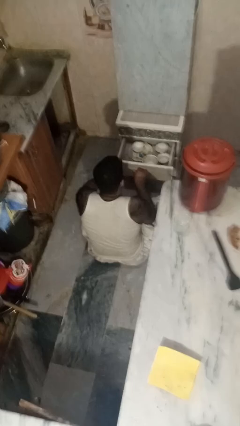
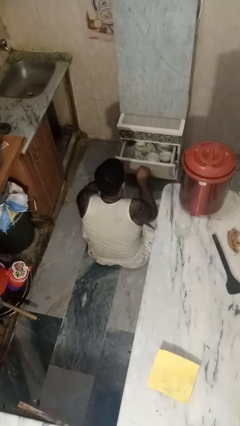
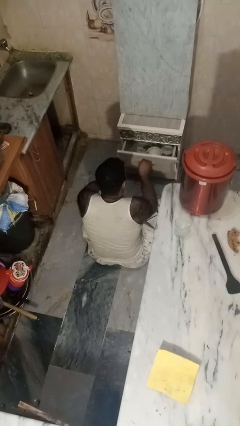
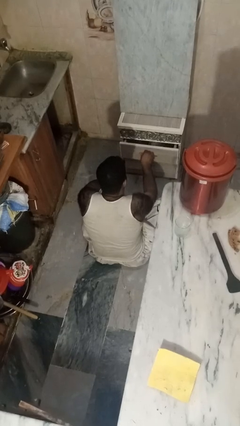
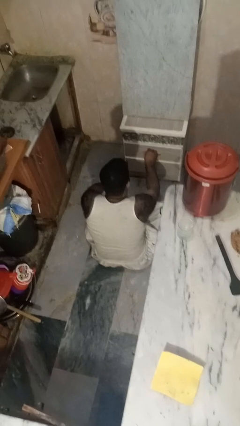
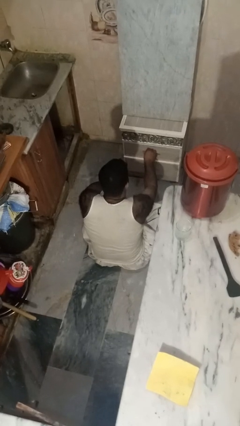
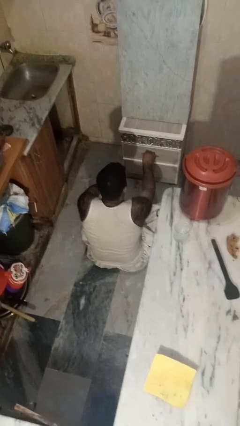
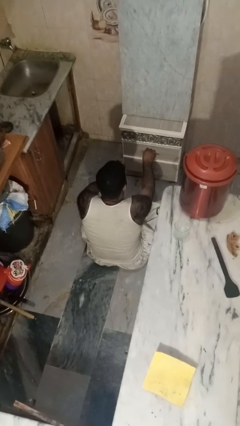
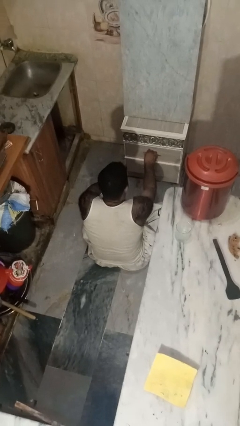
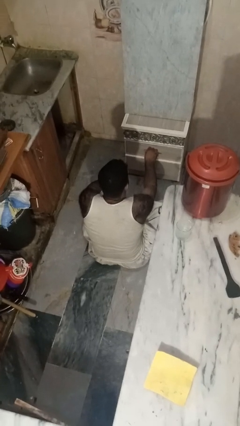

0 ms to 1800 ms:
person closes kitchen drawer

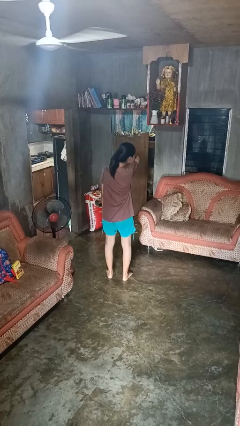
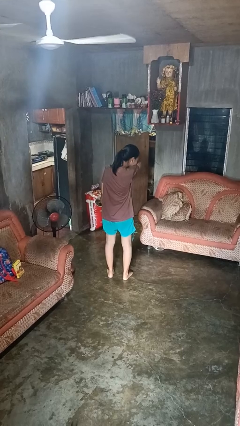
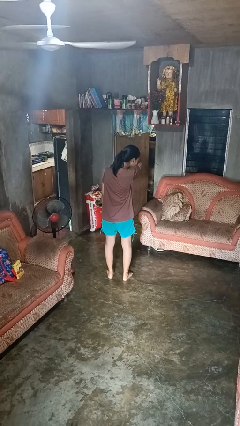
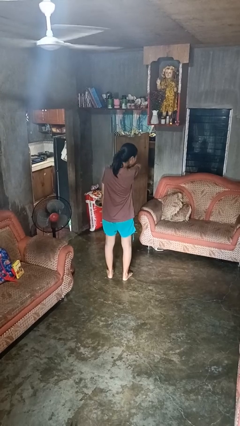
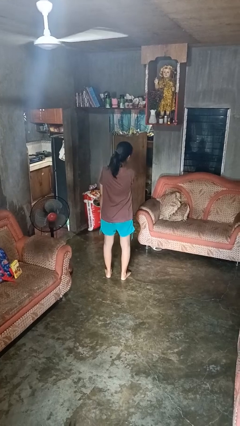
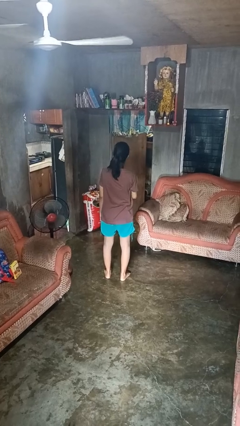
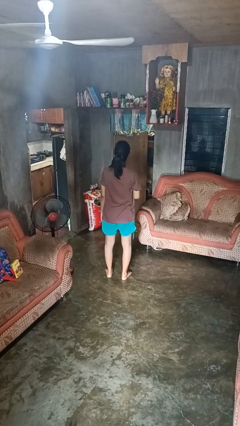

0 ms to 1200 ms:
person sneezes into arm

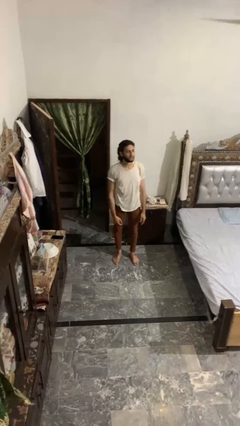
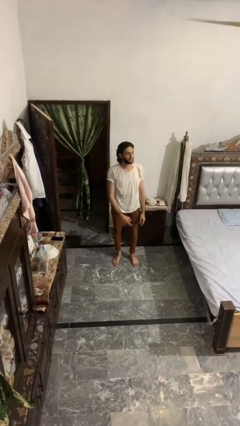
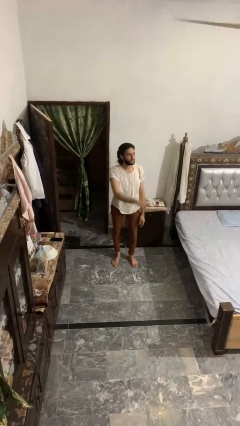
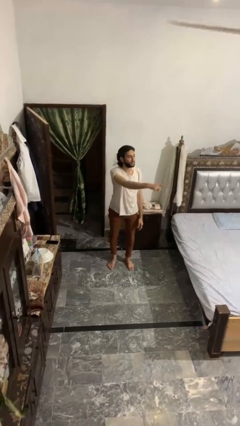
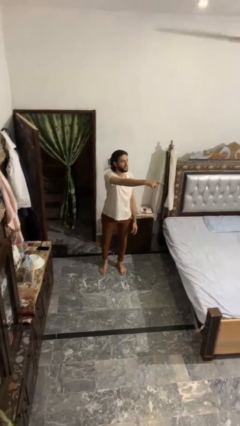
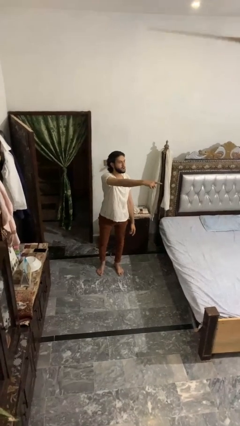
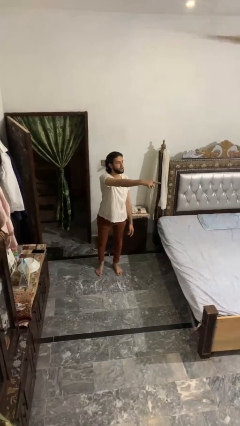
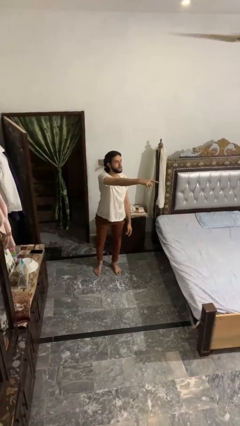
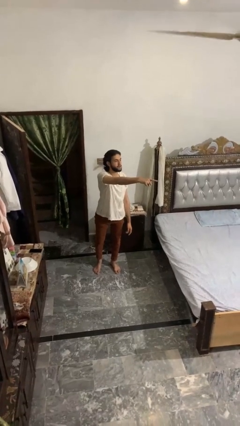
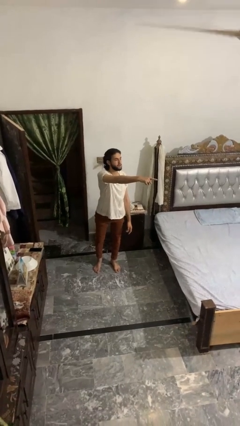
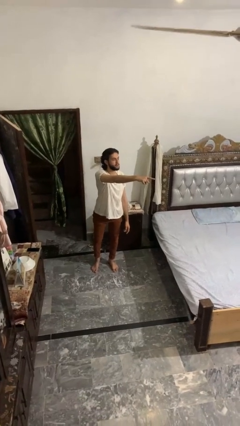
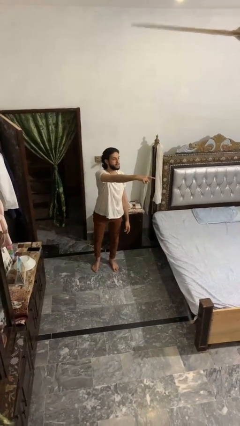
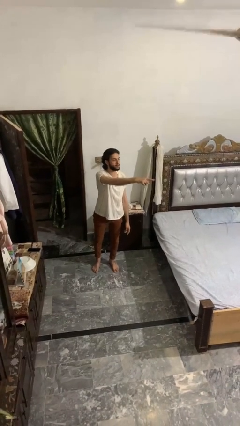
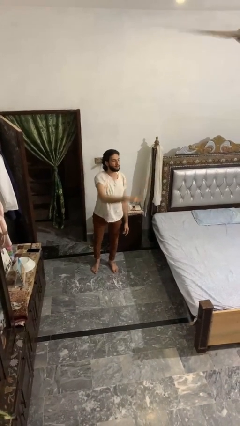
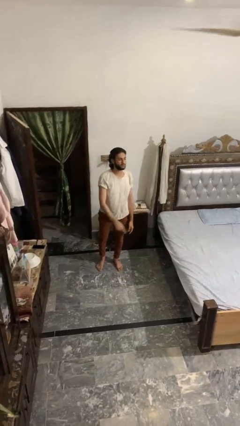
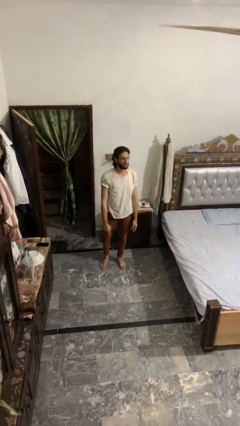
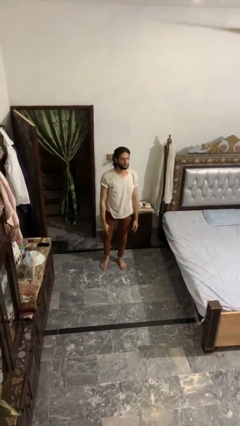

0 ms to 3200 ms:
person points at person

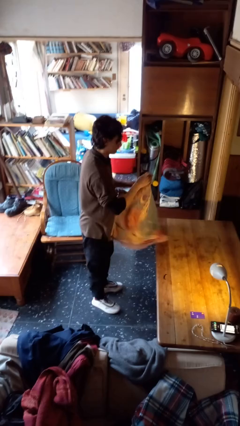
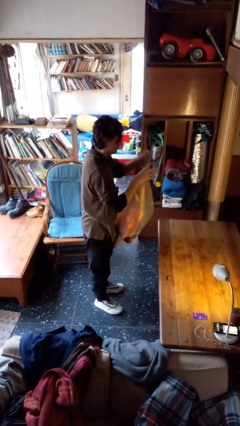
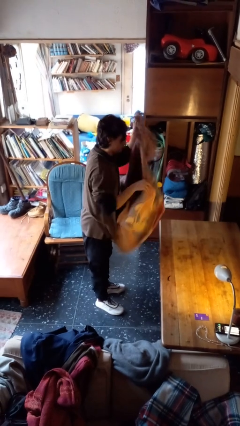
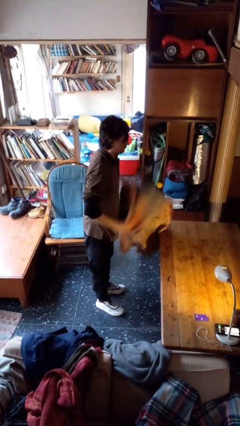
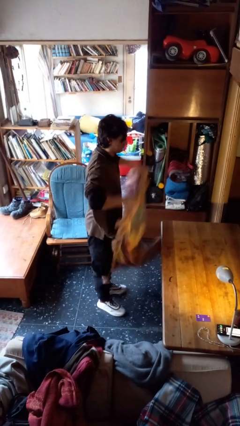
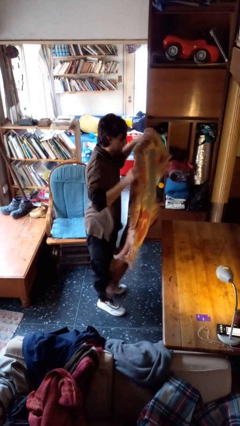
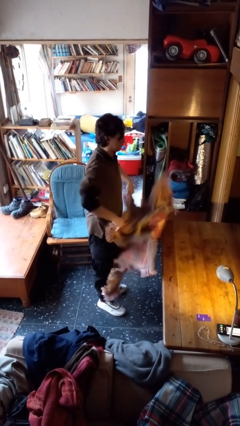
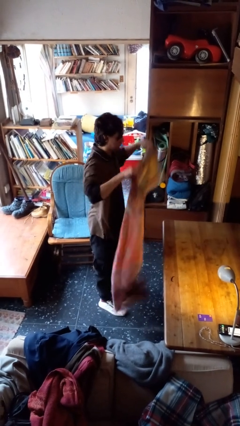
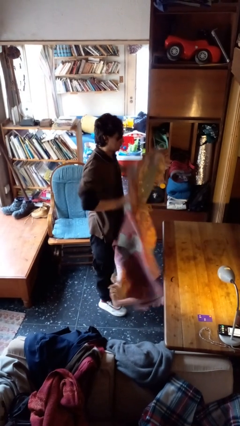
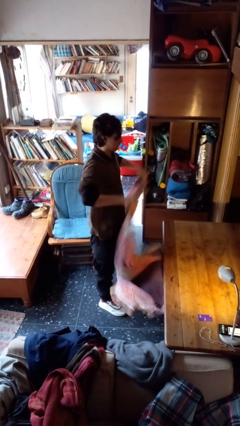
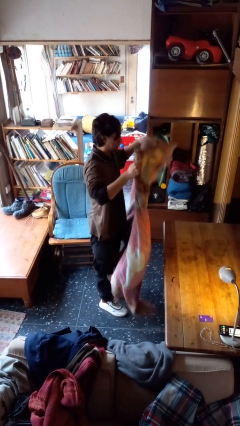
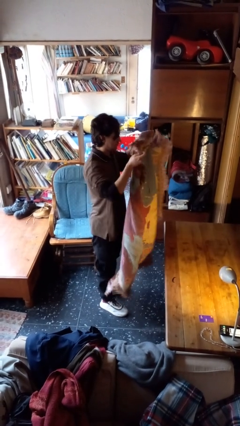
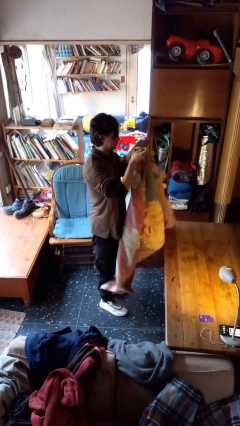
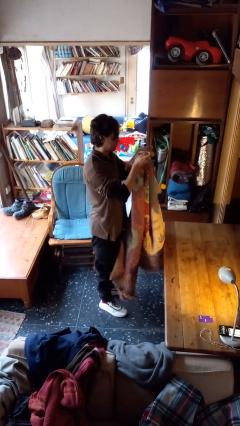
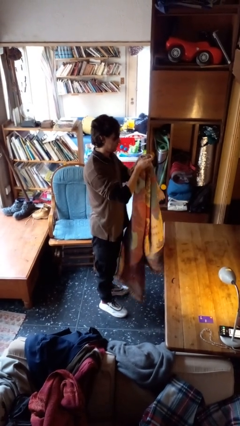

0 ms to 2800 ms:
person unfolds blanket

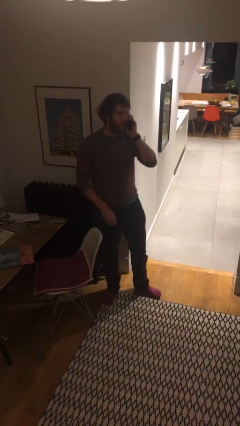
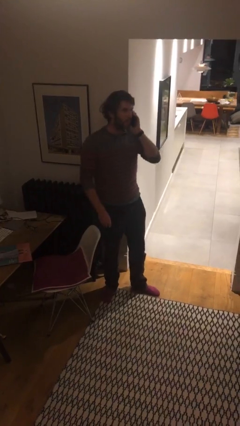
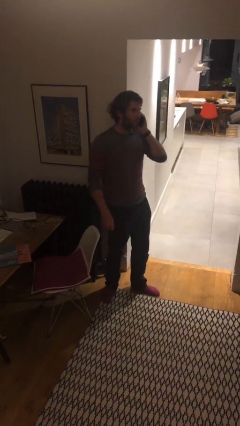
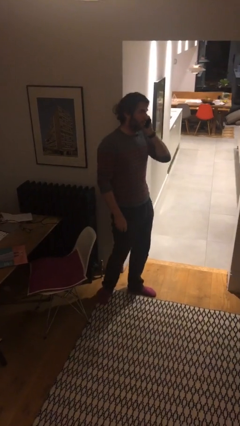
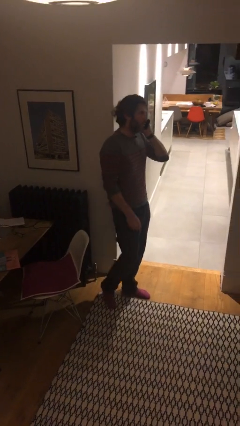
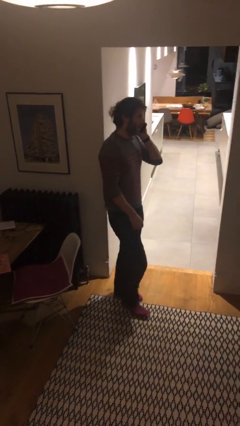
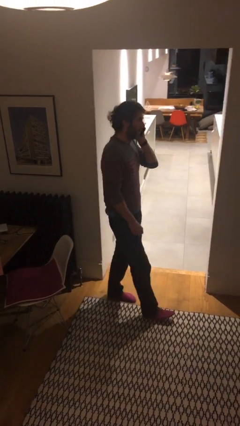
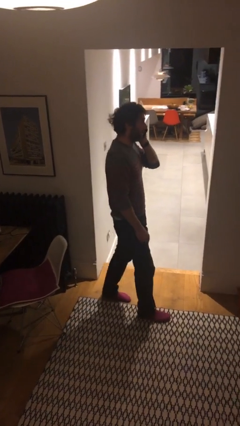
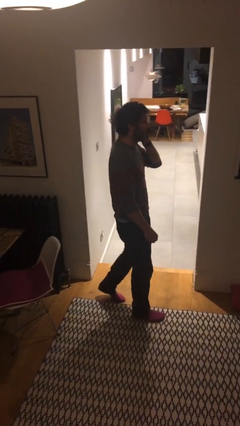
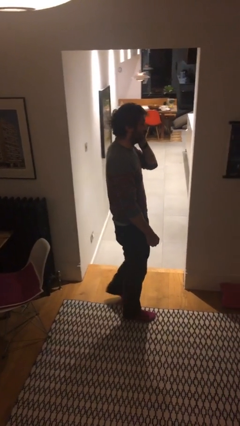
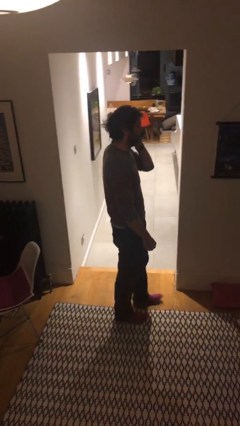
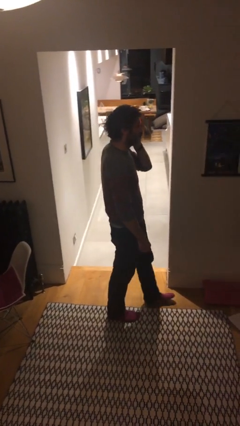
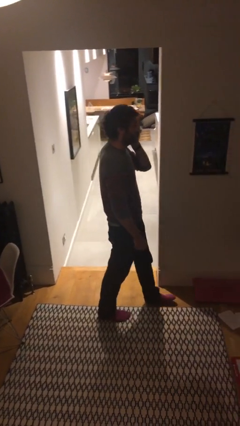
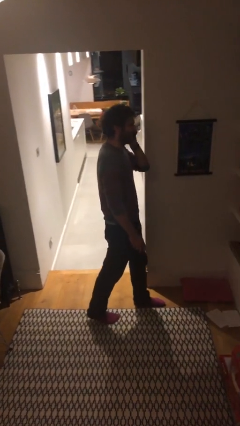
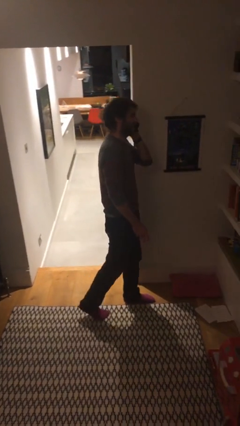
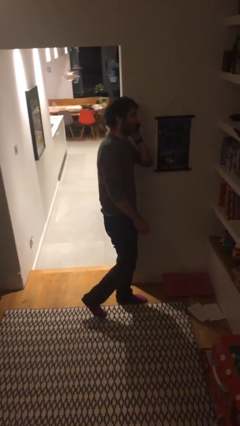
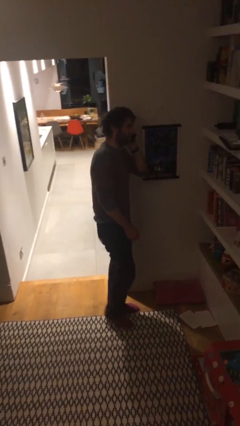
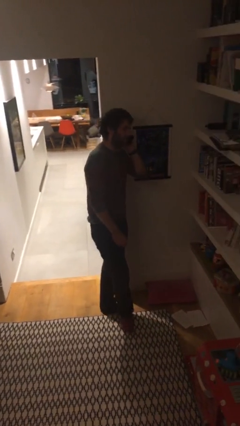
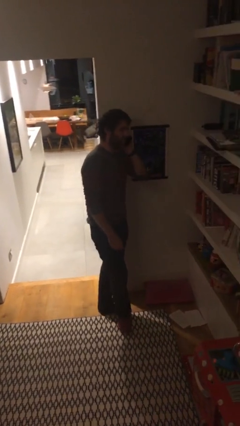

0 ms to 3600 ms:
person talks on phone

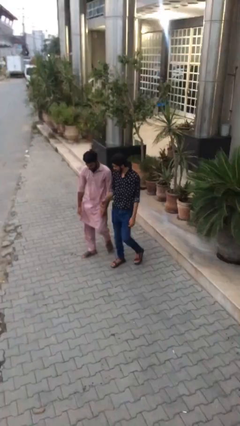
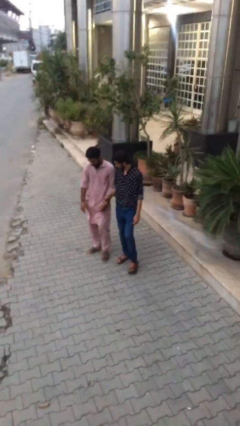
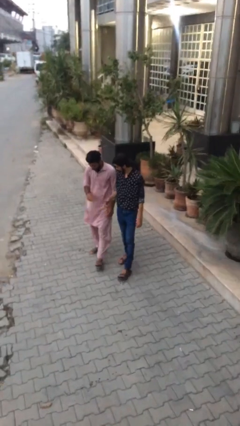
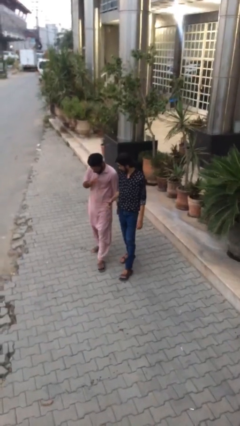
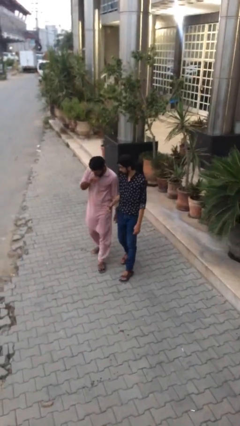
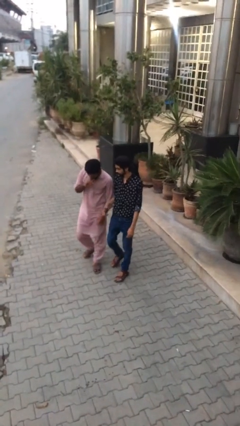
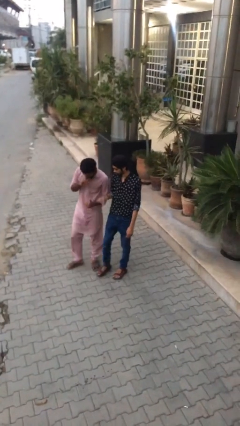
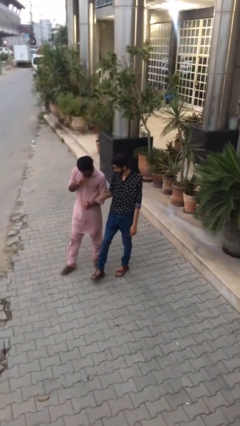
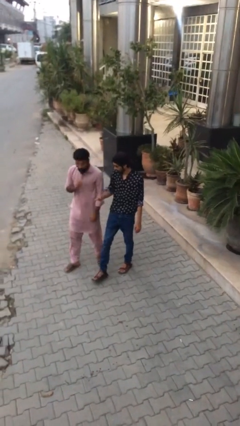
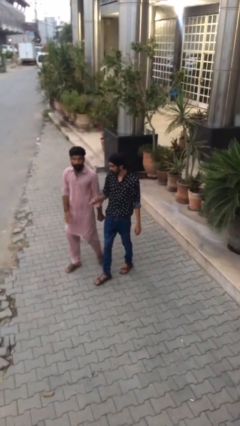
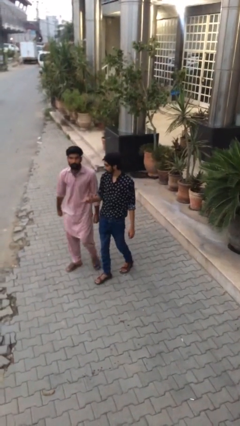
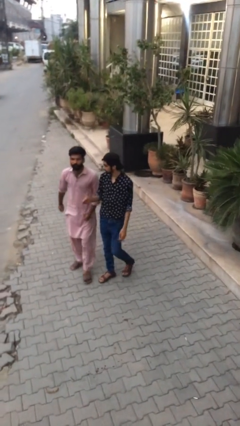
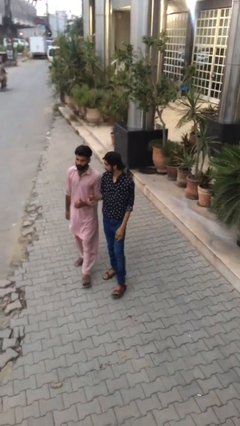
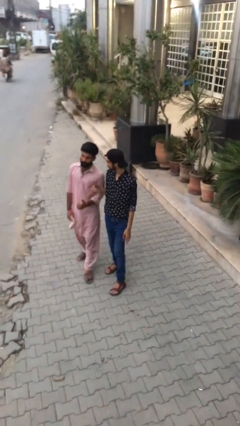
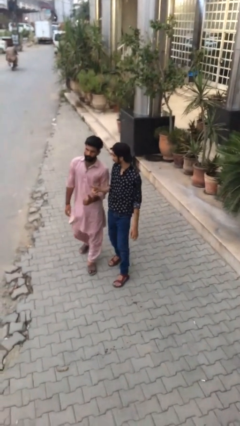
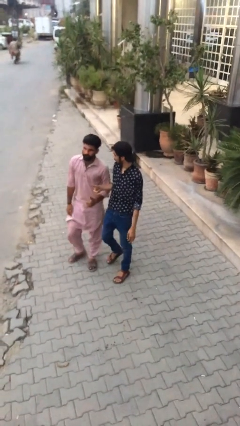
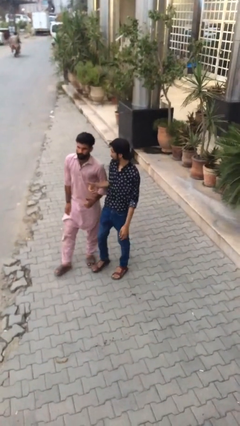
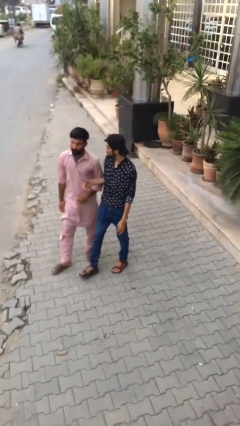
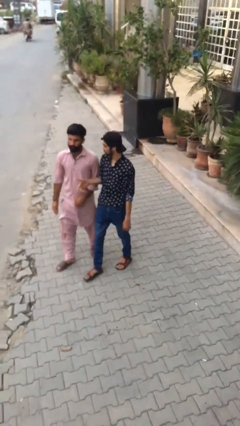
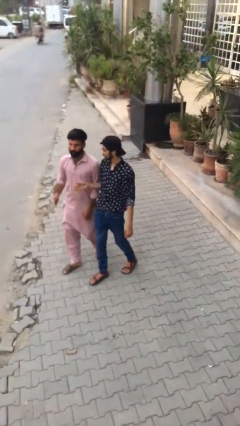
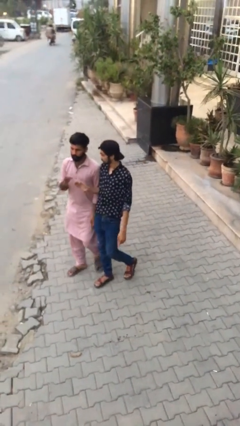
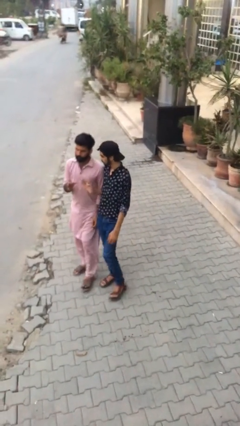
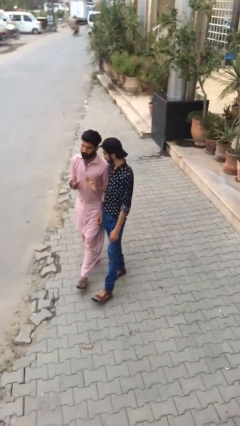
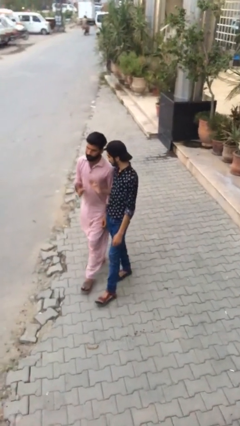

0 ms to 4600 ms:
person talks to person

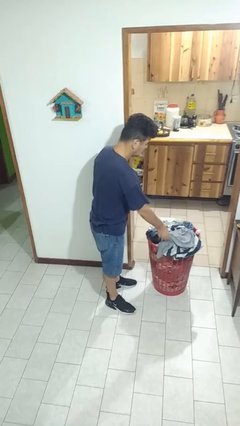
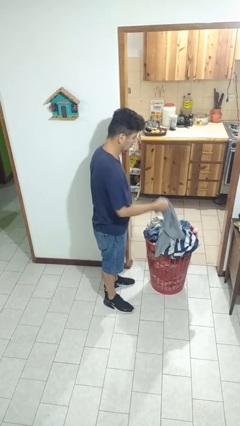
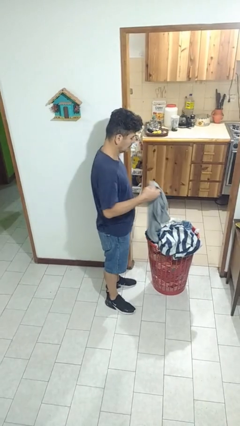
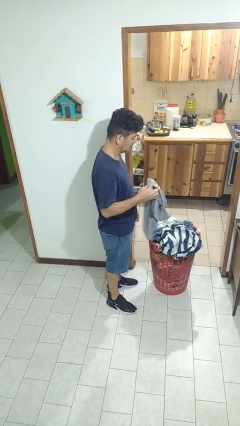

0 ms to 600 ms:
person takes object from basket
